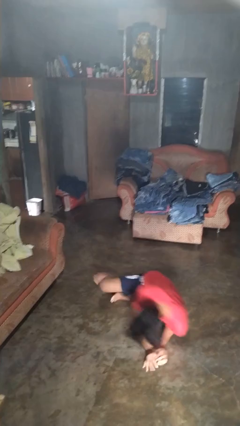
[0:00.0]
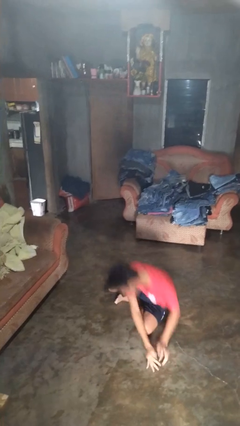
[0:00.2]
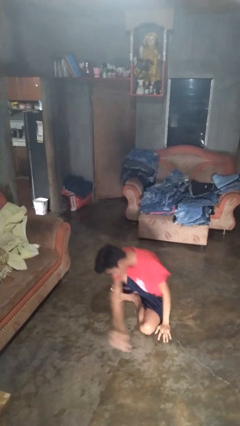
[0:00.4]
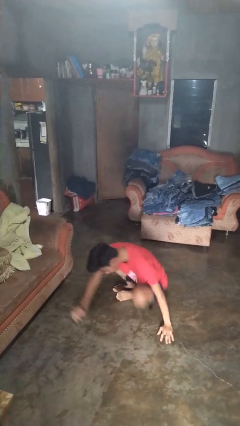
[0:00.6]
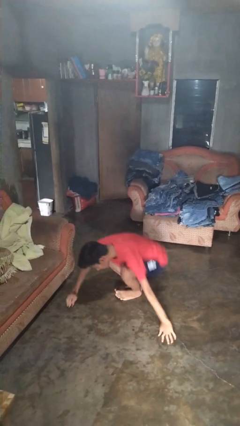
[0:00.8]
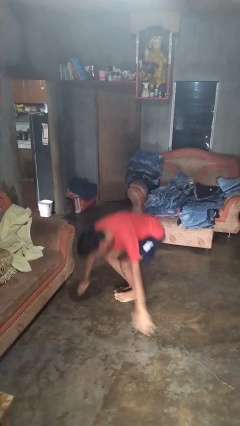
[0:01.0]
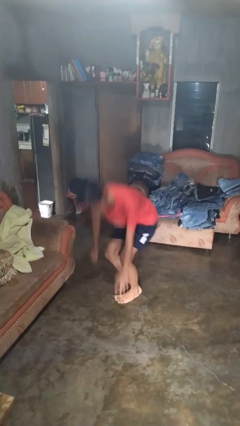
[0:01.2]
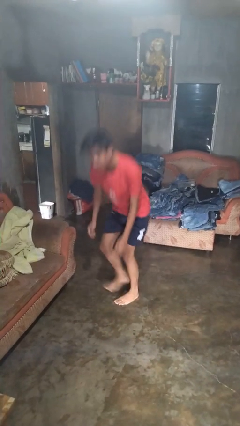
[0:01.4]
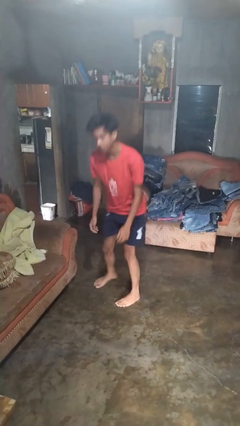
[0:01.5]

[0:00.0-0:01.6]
person stands up from floor

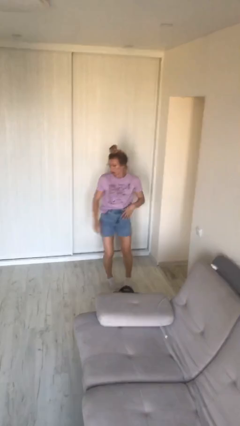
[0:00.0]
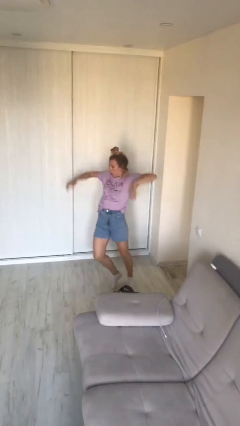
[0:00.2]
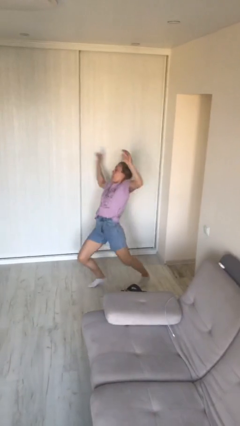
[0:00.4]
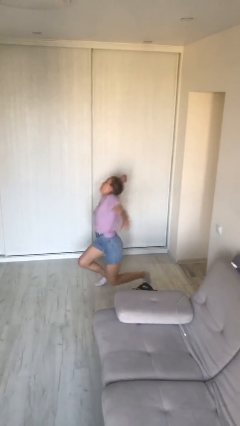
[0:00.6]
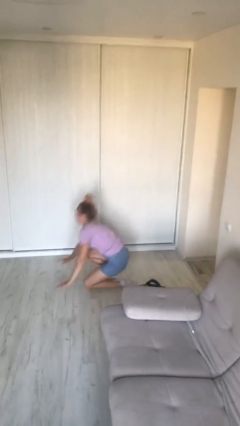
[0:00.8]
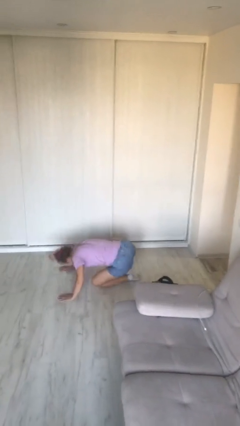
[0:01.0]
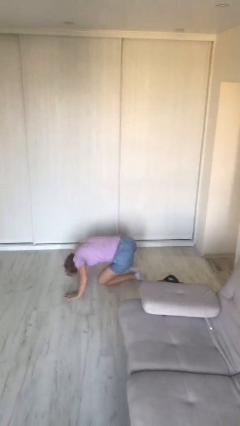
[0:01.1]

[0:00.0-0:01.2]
person trips on object on floor

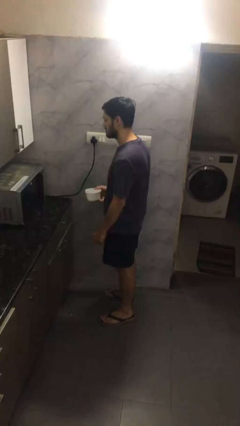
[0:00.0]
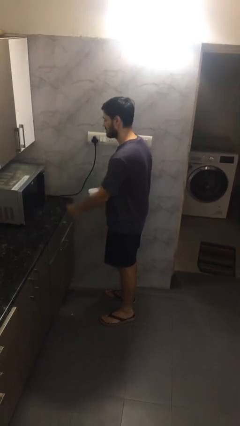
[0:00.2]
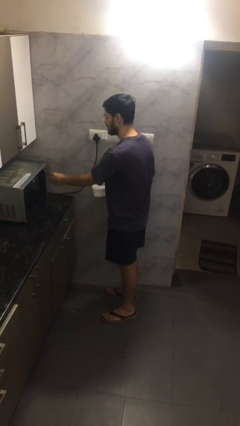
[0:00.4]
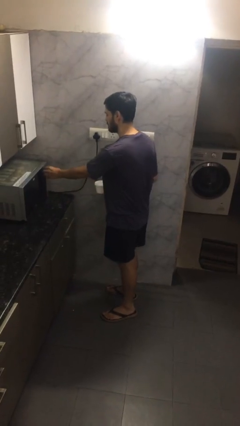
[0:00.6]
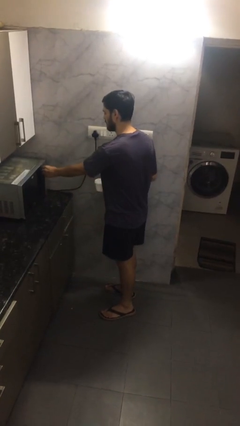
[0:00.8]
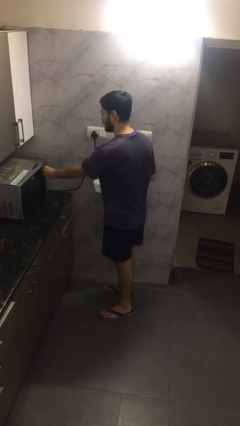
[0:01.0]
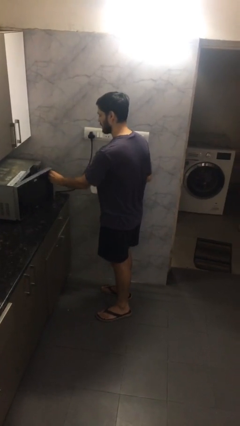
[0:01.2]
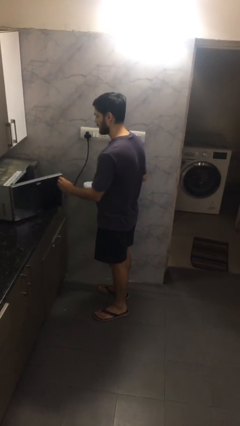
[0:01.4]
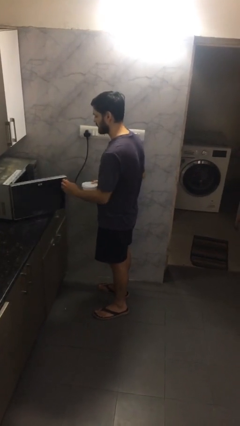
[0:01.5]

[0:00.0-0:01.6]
person opens microwave

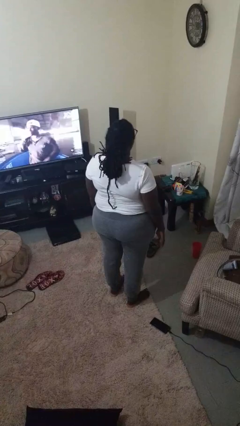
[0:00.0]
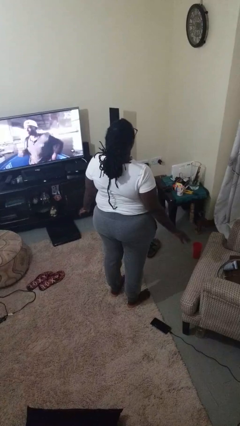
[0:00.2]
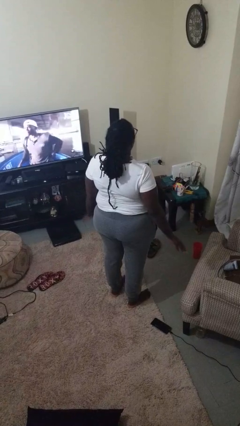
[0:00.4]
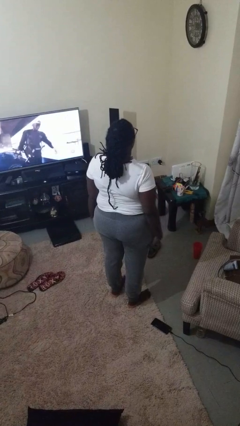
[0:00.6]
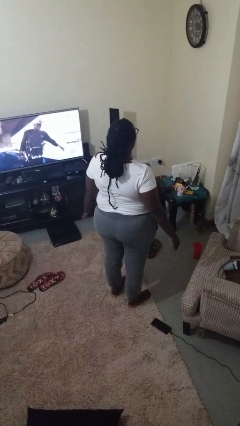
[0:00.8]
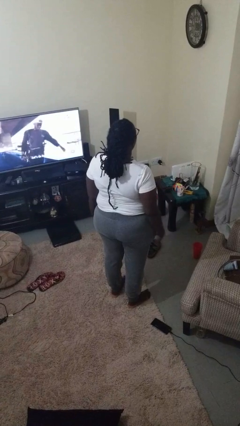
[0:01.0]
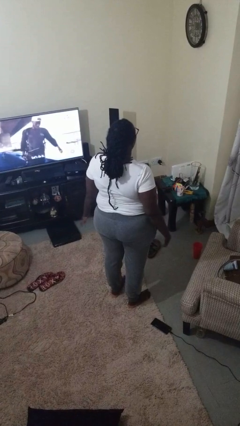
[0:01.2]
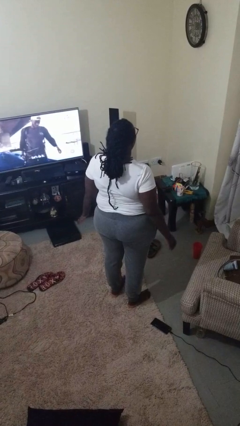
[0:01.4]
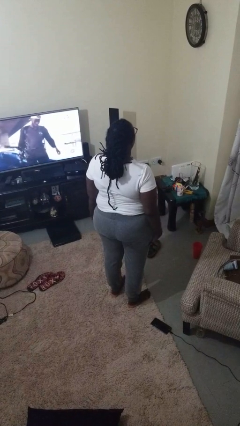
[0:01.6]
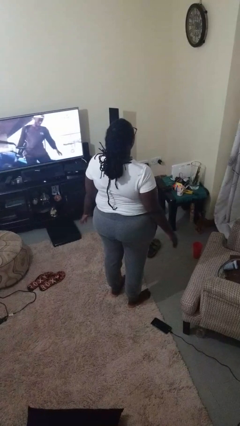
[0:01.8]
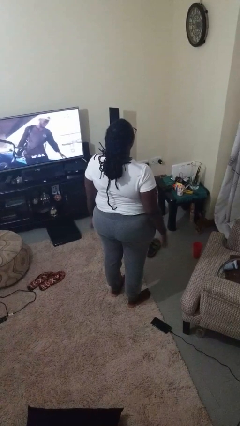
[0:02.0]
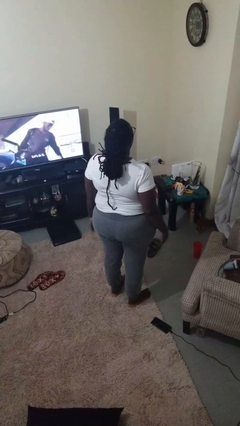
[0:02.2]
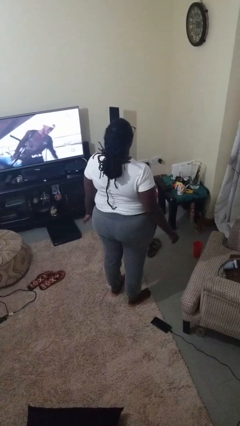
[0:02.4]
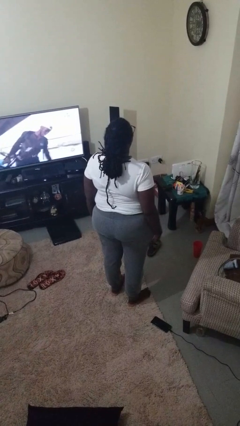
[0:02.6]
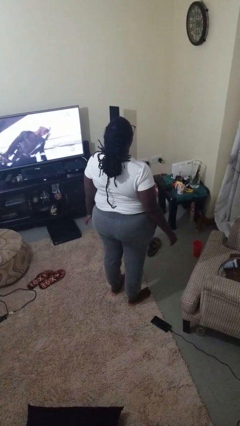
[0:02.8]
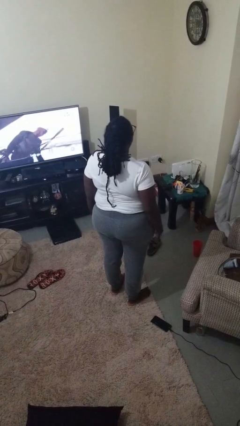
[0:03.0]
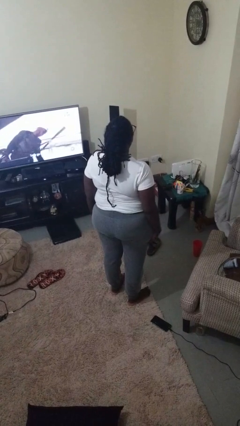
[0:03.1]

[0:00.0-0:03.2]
person slaps hands on thighs

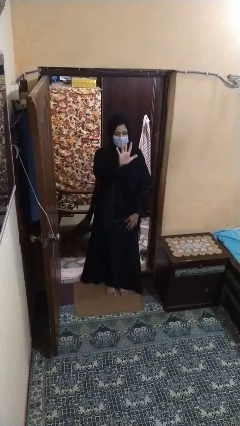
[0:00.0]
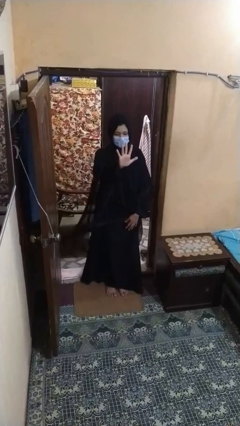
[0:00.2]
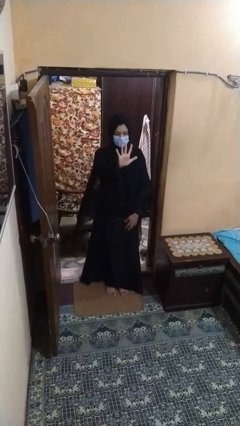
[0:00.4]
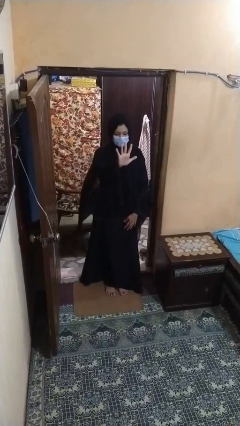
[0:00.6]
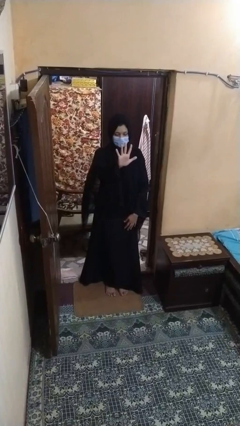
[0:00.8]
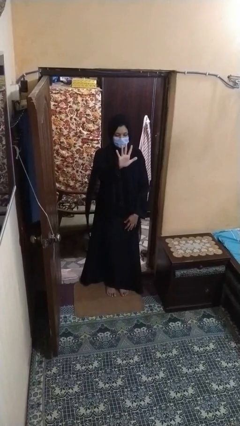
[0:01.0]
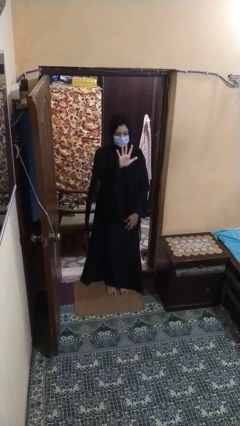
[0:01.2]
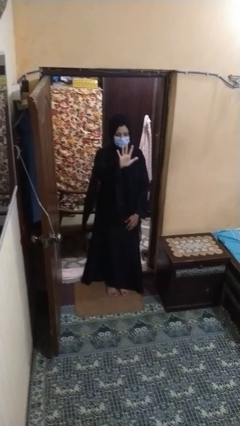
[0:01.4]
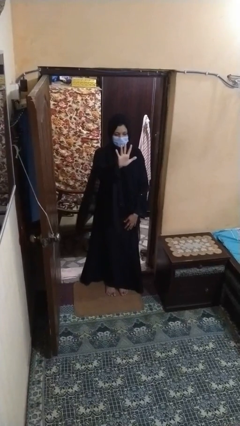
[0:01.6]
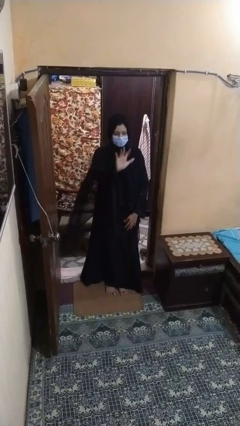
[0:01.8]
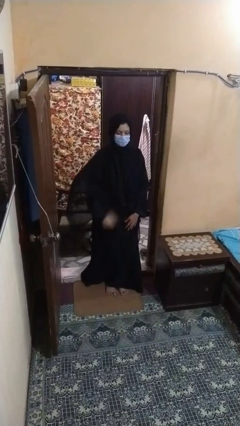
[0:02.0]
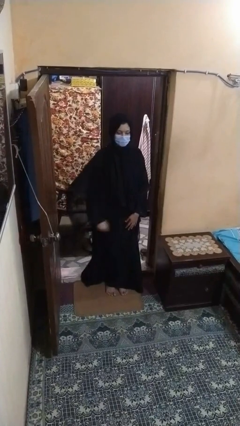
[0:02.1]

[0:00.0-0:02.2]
person gestures number five

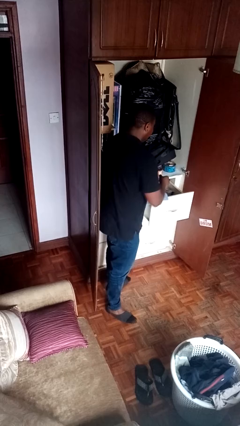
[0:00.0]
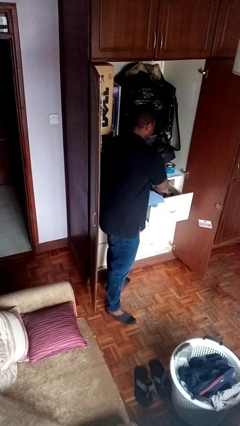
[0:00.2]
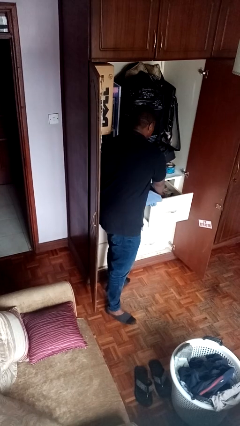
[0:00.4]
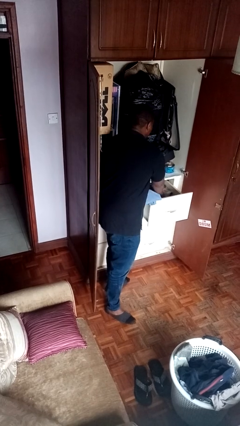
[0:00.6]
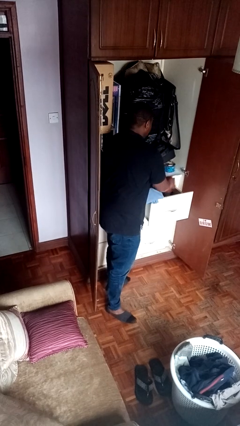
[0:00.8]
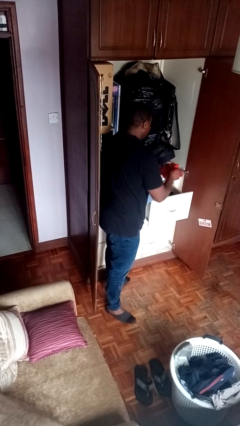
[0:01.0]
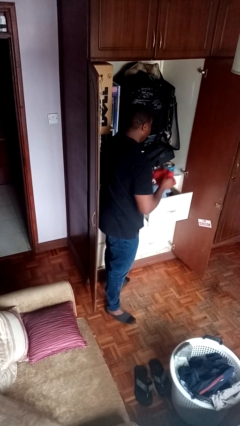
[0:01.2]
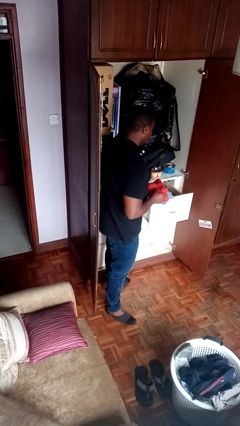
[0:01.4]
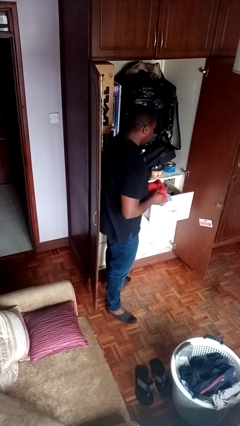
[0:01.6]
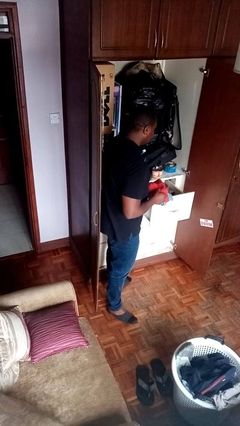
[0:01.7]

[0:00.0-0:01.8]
person takes clothes from dresser

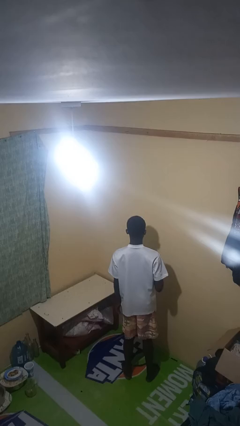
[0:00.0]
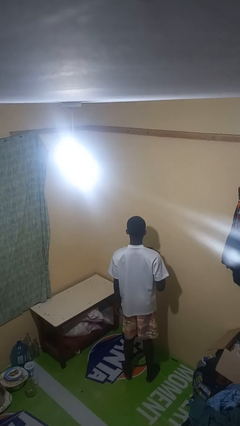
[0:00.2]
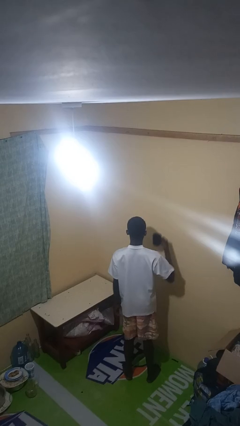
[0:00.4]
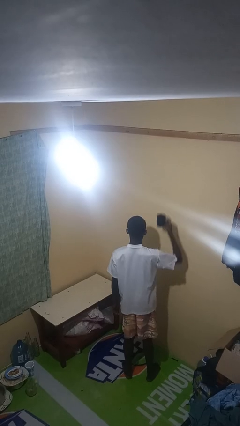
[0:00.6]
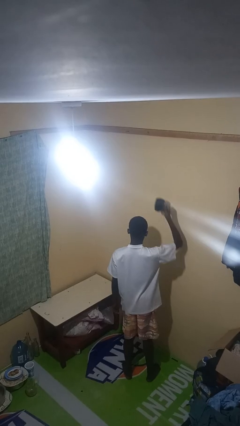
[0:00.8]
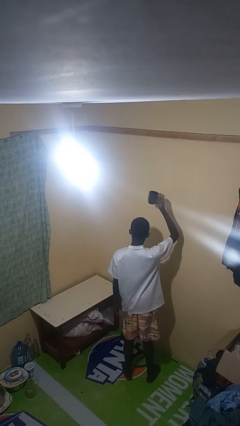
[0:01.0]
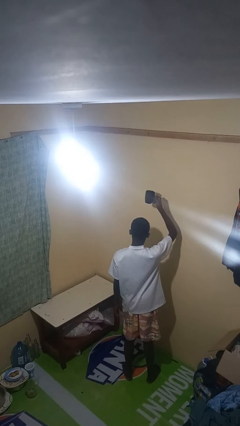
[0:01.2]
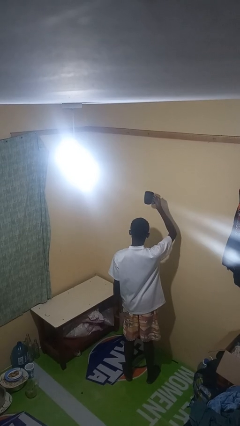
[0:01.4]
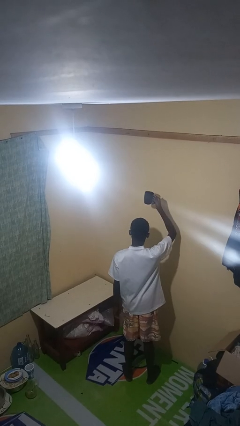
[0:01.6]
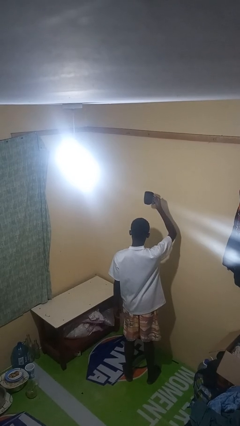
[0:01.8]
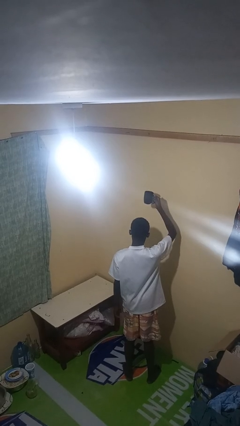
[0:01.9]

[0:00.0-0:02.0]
person holds object above head

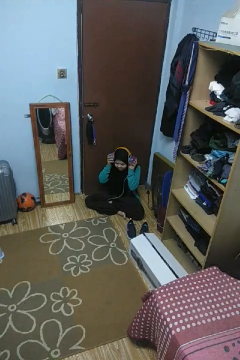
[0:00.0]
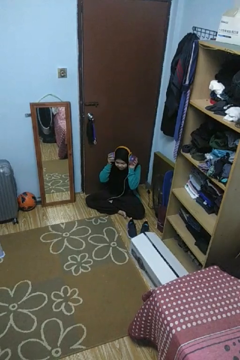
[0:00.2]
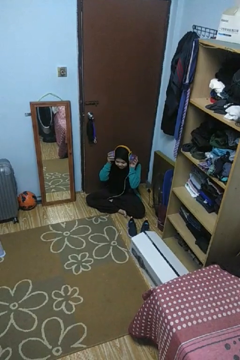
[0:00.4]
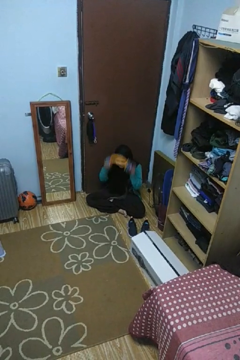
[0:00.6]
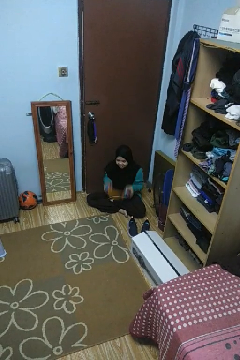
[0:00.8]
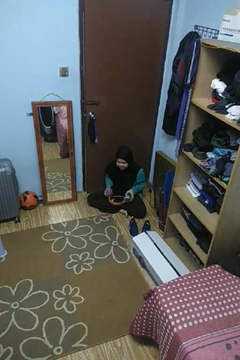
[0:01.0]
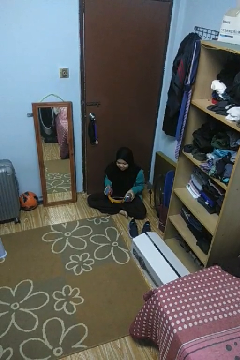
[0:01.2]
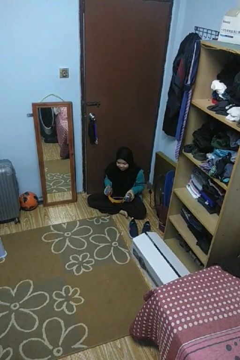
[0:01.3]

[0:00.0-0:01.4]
person takes off headphones

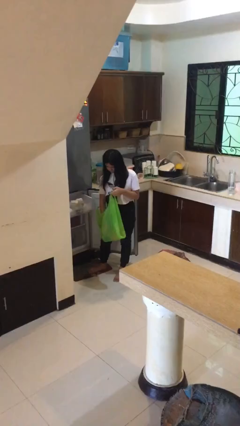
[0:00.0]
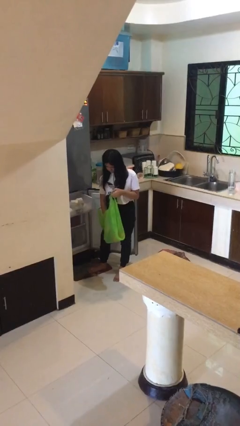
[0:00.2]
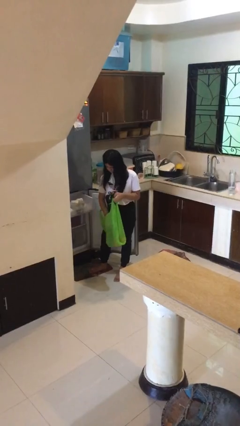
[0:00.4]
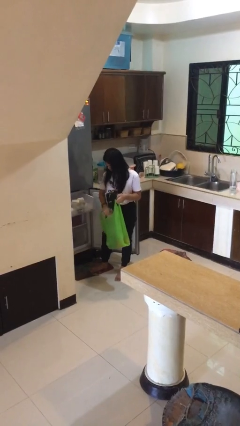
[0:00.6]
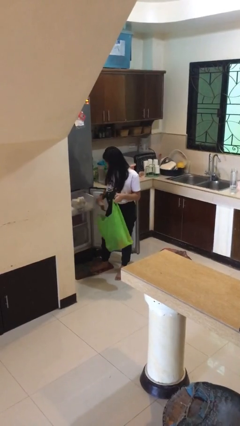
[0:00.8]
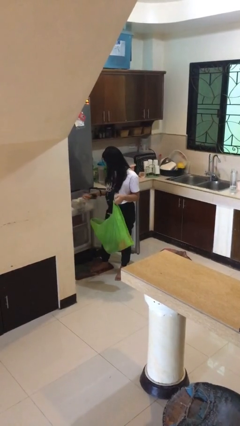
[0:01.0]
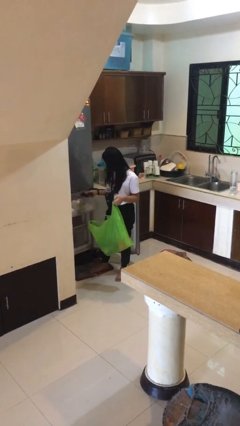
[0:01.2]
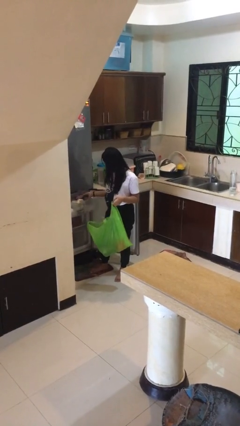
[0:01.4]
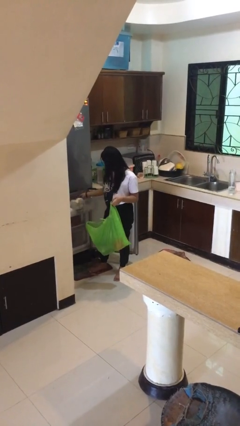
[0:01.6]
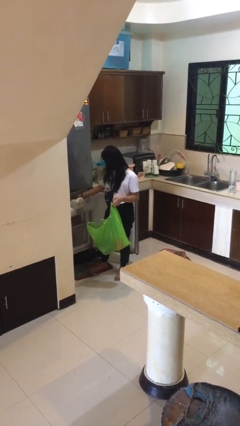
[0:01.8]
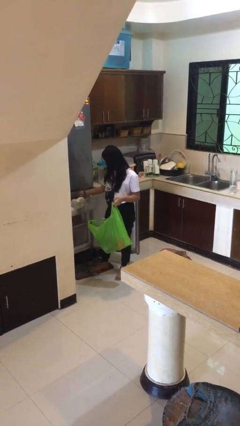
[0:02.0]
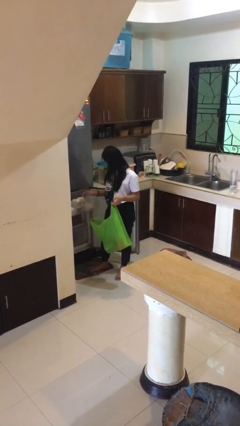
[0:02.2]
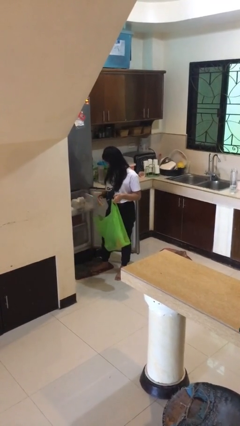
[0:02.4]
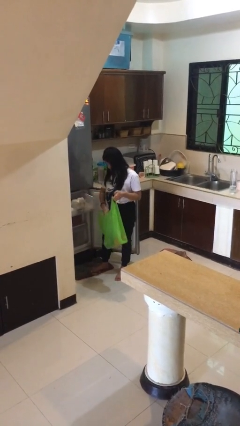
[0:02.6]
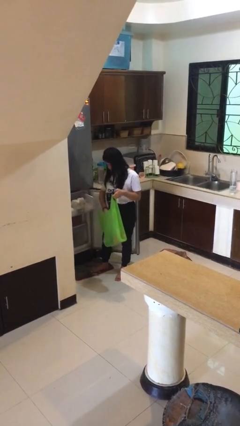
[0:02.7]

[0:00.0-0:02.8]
person loads groceries into refrigerator
